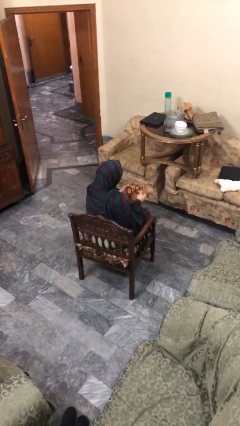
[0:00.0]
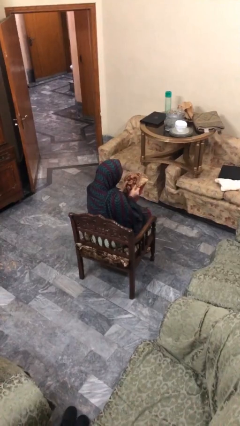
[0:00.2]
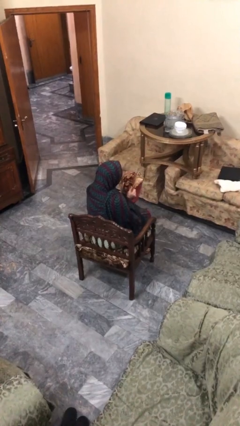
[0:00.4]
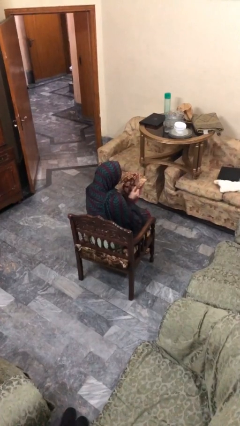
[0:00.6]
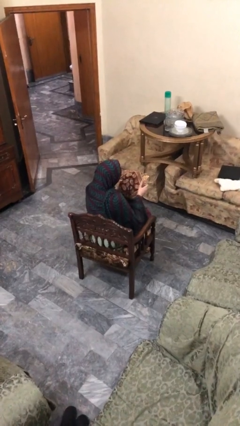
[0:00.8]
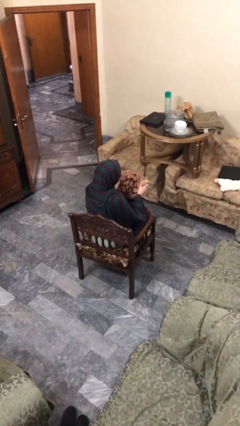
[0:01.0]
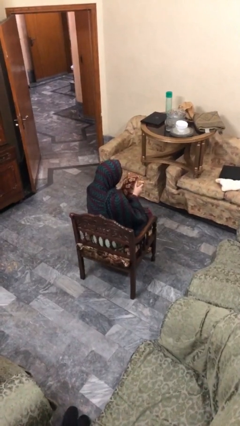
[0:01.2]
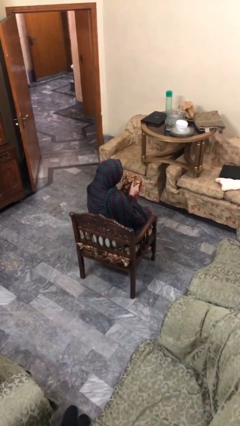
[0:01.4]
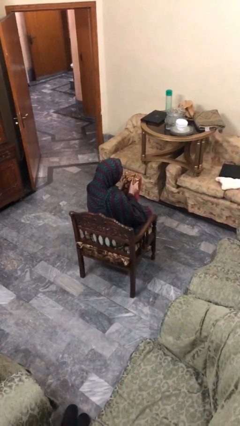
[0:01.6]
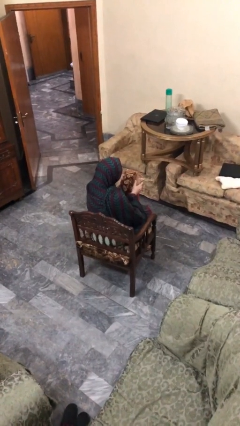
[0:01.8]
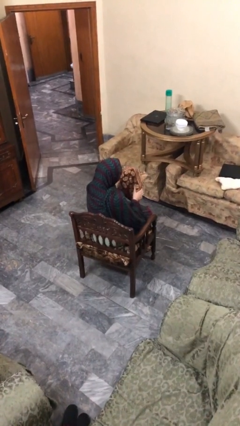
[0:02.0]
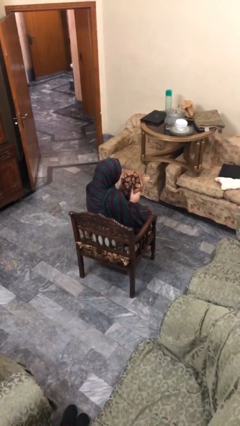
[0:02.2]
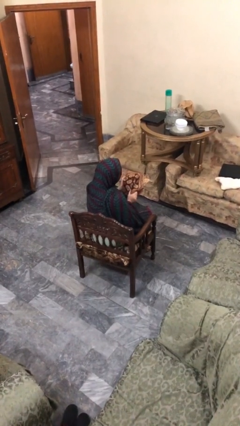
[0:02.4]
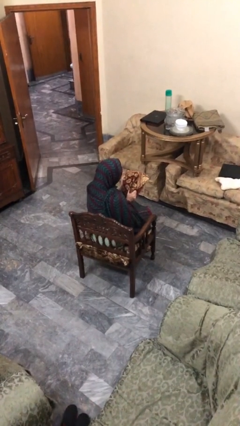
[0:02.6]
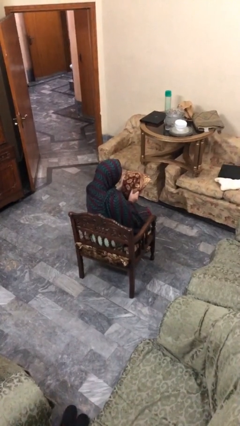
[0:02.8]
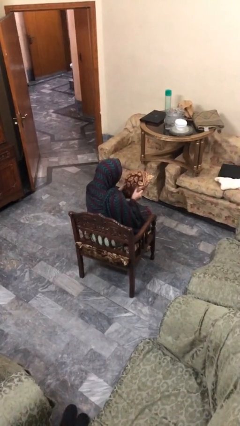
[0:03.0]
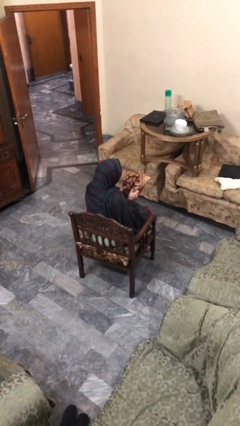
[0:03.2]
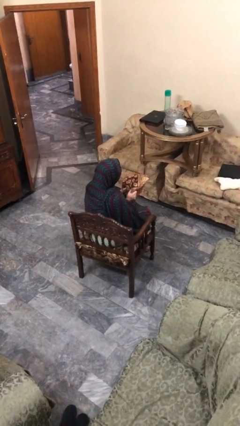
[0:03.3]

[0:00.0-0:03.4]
person squeezes object

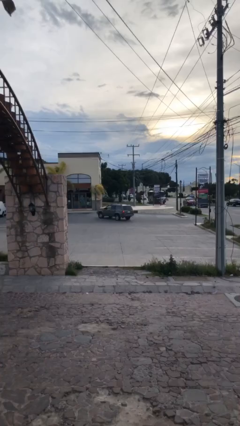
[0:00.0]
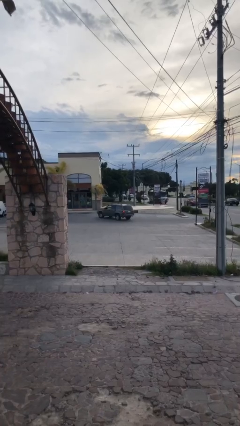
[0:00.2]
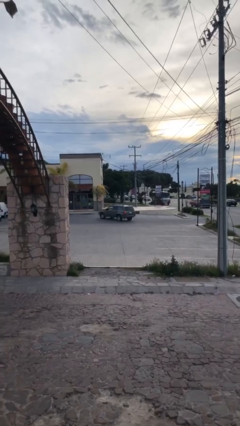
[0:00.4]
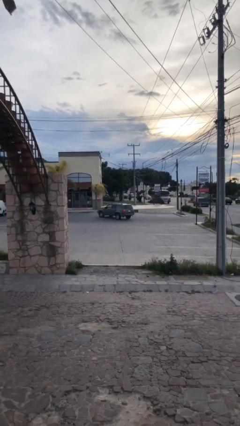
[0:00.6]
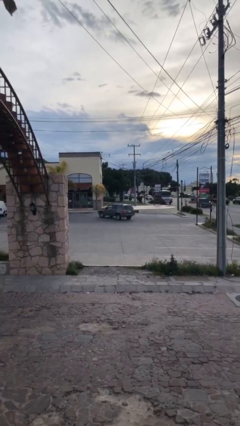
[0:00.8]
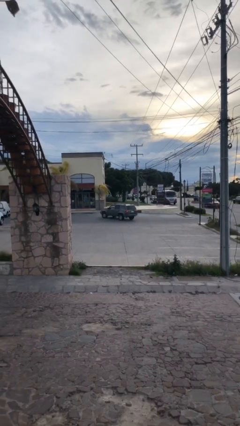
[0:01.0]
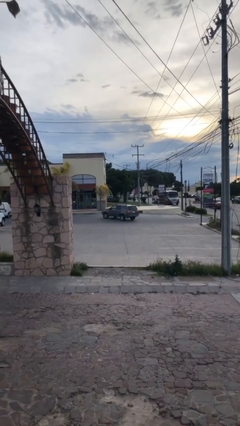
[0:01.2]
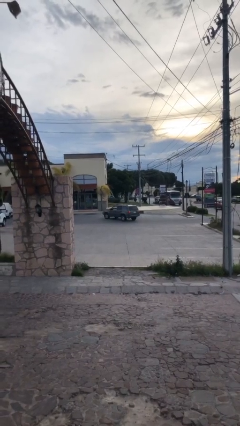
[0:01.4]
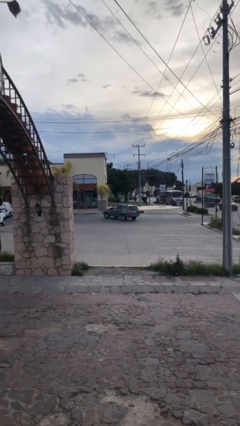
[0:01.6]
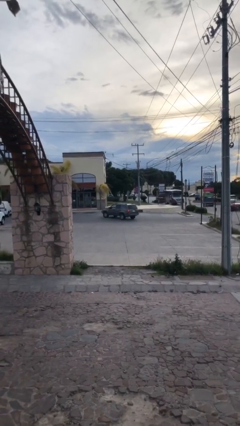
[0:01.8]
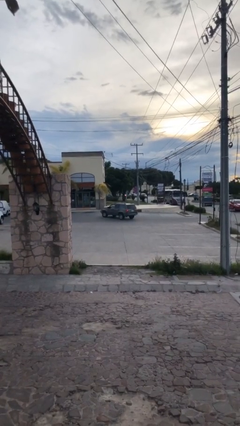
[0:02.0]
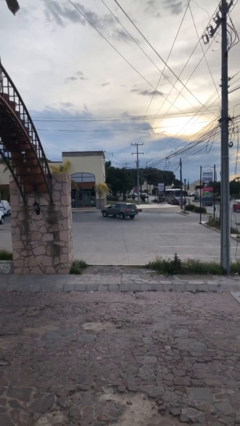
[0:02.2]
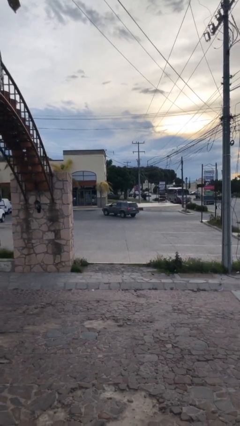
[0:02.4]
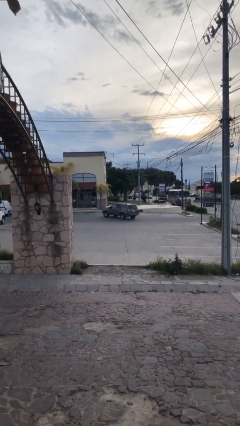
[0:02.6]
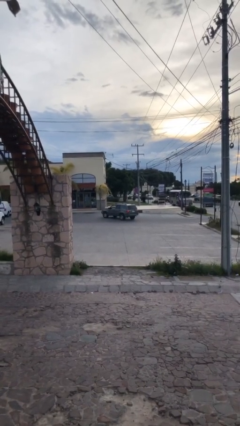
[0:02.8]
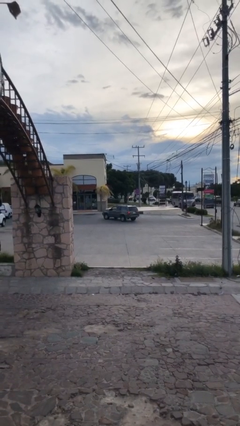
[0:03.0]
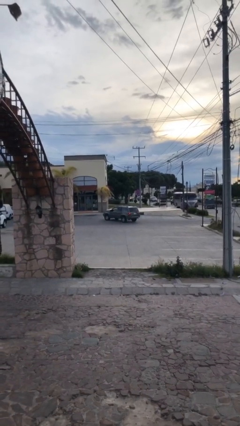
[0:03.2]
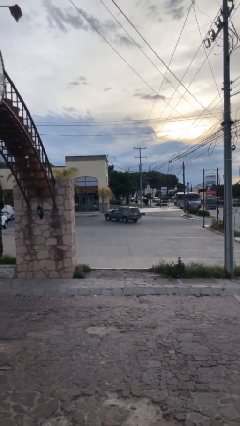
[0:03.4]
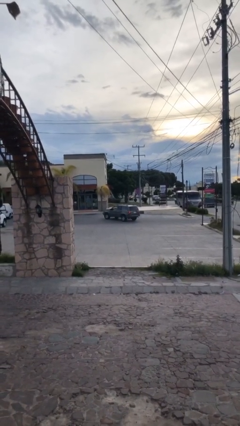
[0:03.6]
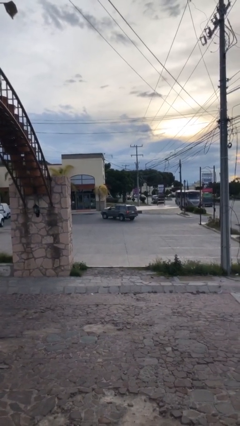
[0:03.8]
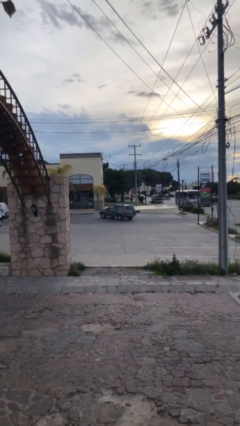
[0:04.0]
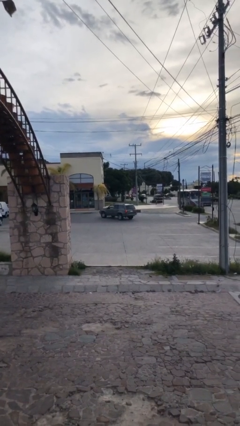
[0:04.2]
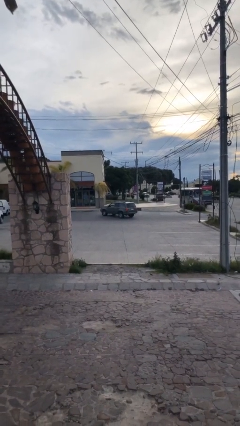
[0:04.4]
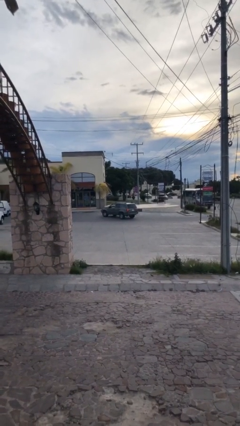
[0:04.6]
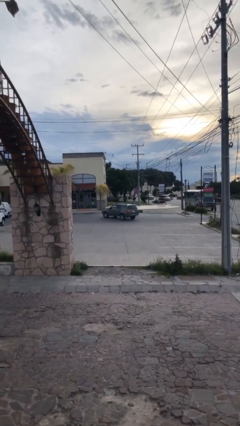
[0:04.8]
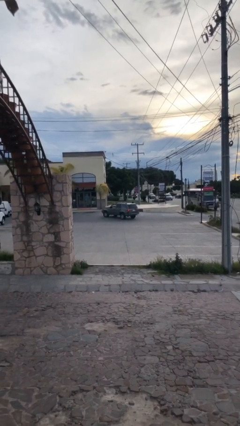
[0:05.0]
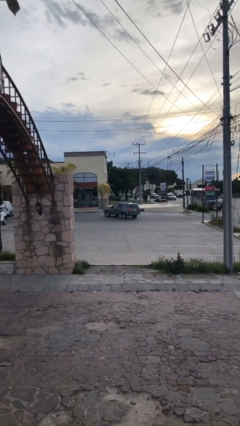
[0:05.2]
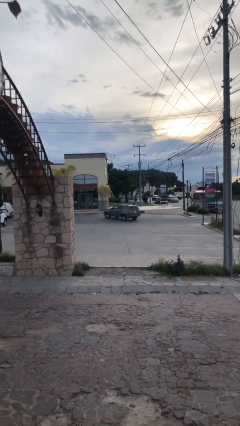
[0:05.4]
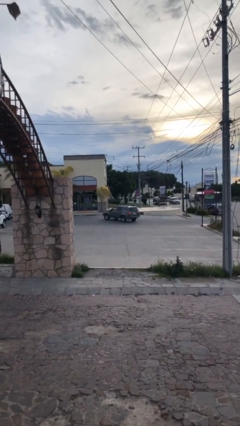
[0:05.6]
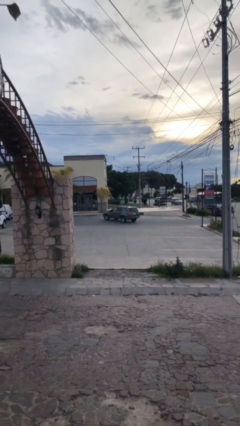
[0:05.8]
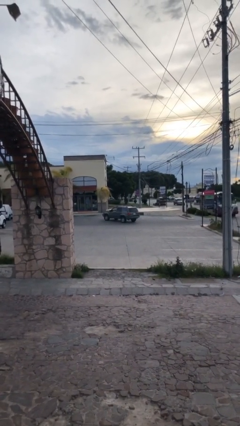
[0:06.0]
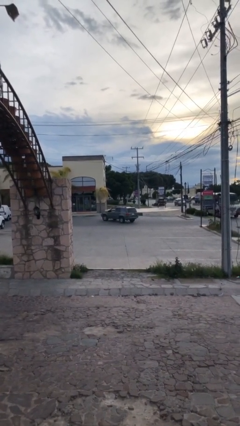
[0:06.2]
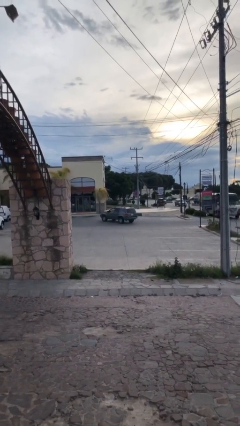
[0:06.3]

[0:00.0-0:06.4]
car drops off person

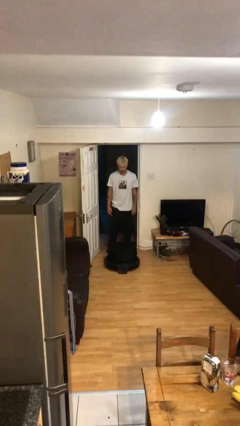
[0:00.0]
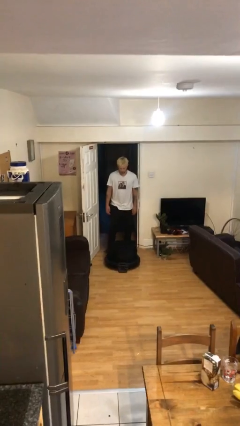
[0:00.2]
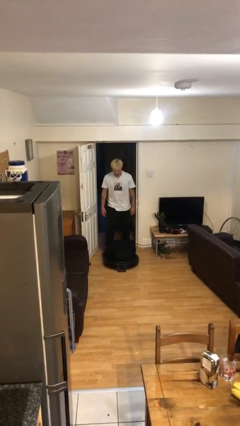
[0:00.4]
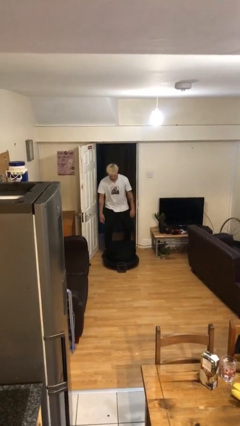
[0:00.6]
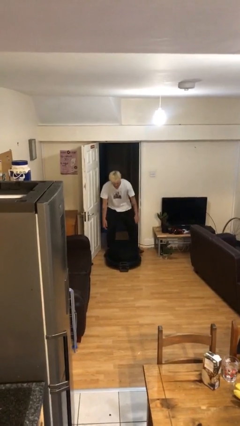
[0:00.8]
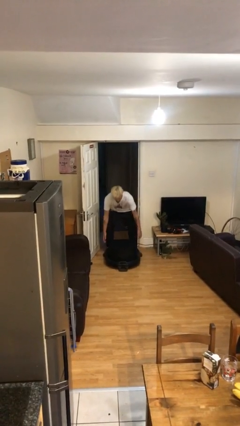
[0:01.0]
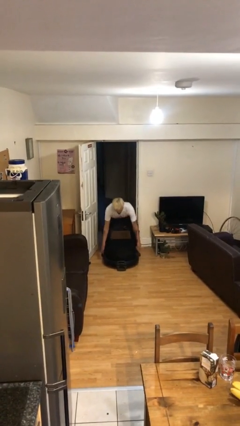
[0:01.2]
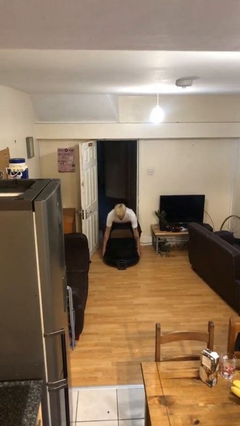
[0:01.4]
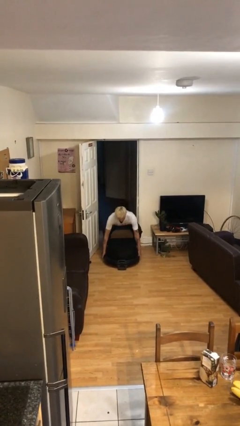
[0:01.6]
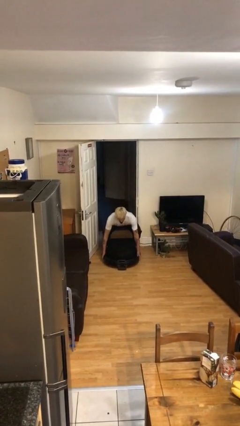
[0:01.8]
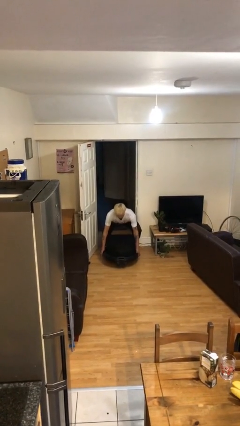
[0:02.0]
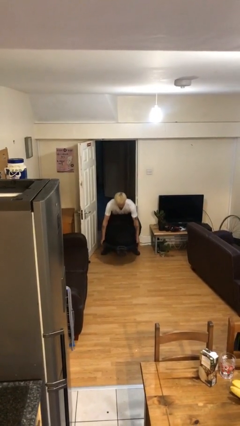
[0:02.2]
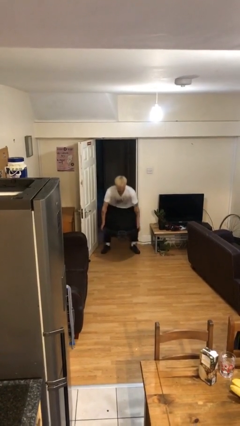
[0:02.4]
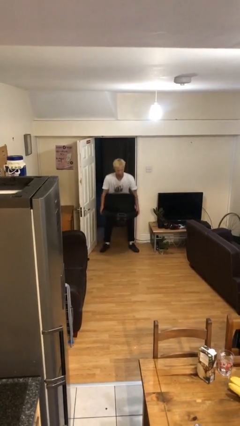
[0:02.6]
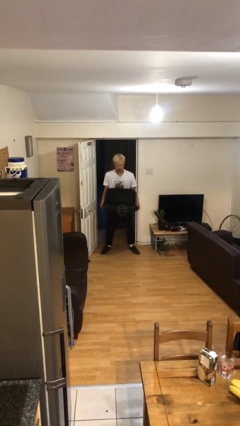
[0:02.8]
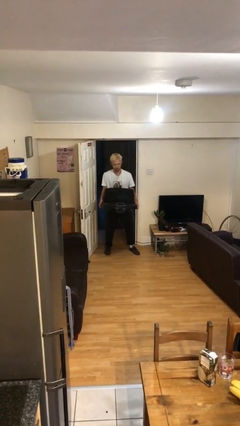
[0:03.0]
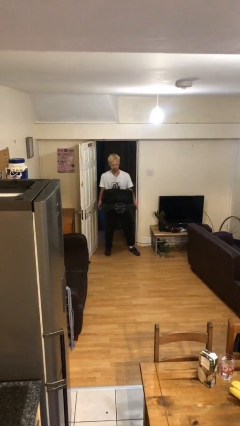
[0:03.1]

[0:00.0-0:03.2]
person picks up object from floor

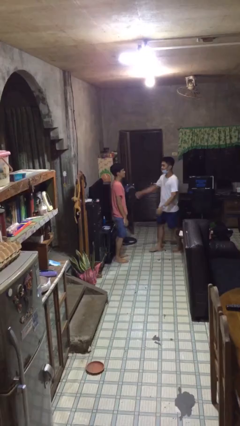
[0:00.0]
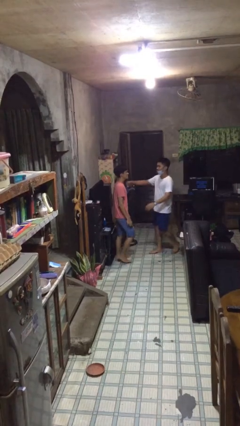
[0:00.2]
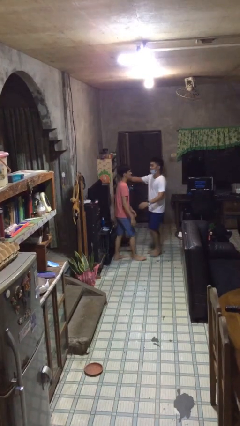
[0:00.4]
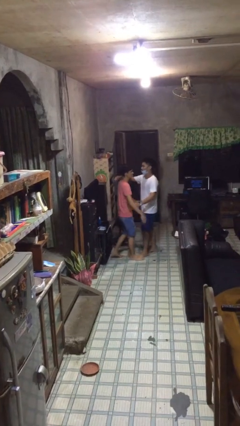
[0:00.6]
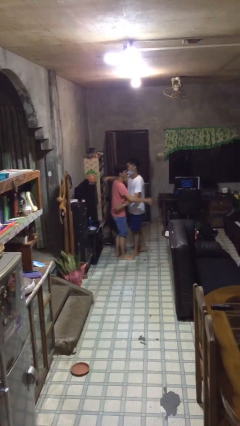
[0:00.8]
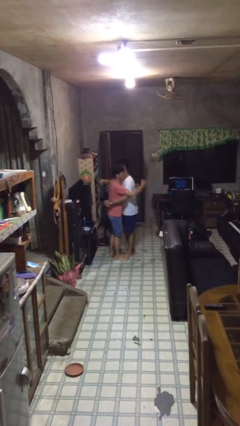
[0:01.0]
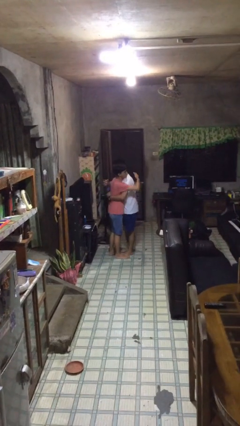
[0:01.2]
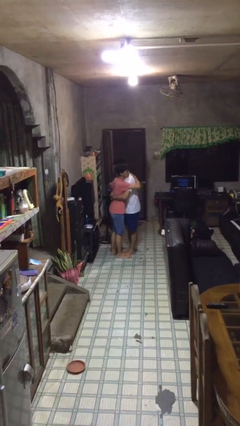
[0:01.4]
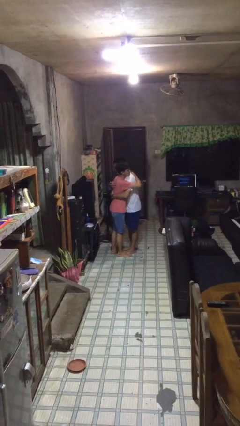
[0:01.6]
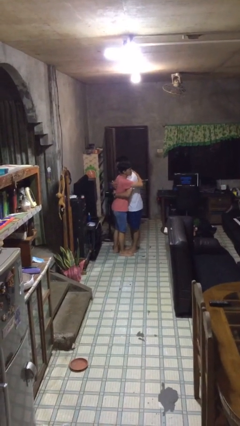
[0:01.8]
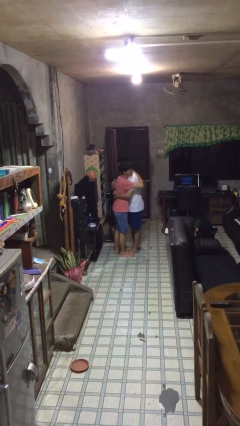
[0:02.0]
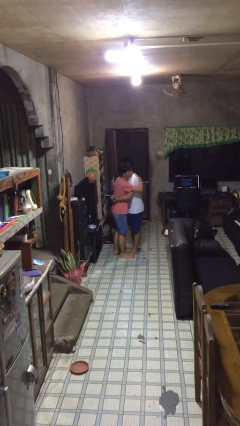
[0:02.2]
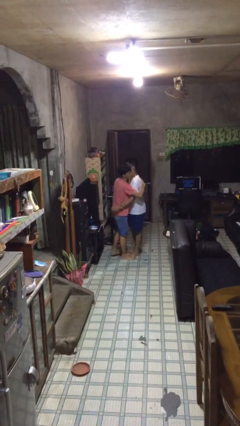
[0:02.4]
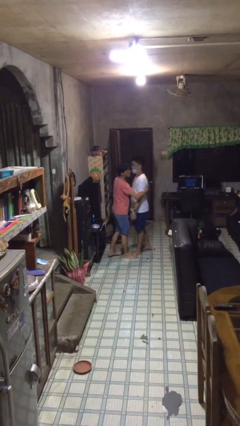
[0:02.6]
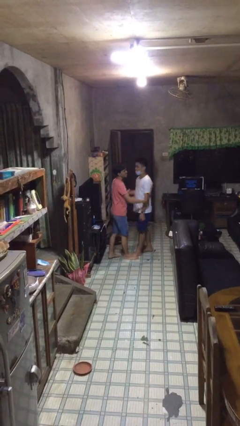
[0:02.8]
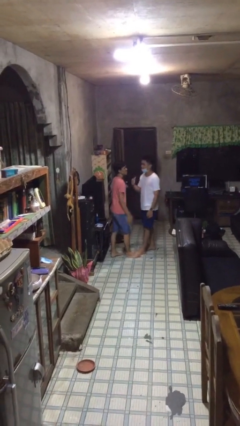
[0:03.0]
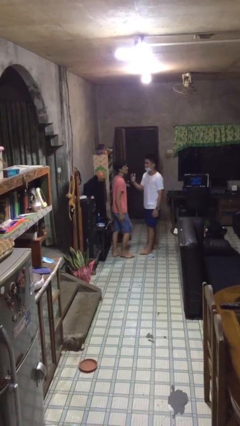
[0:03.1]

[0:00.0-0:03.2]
person embraces person

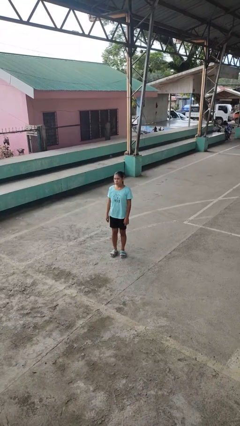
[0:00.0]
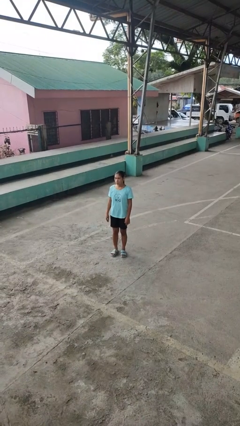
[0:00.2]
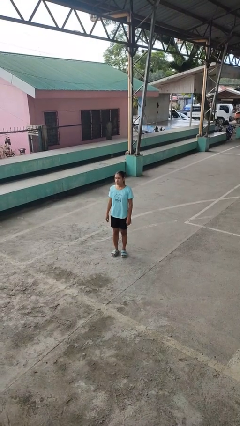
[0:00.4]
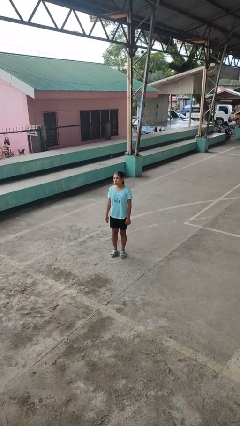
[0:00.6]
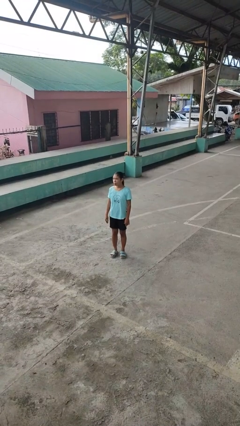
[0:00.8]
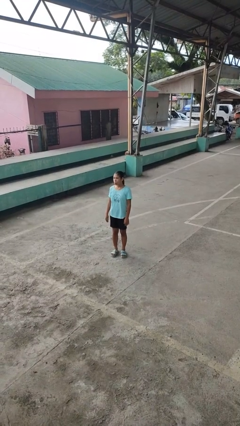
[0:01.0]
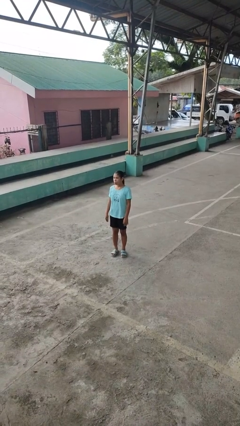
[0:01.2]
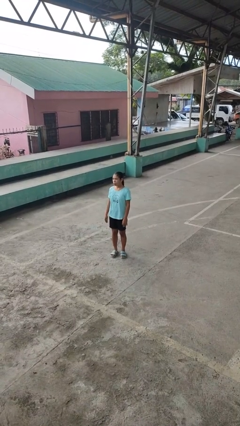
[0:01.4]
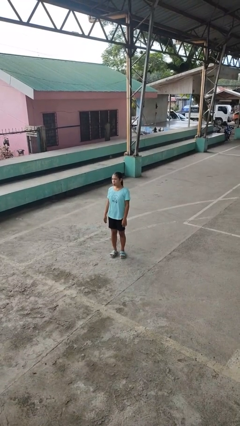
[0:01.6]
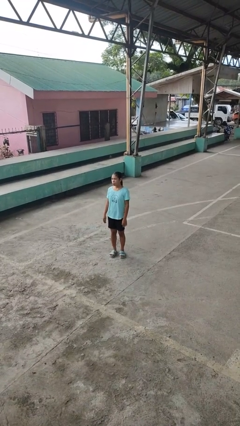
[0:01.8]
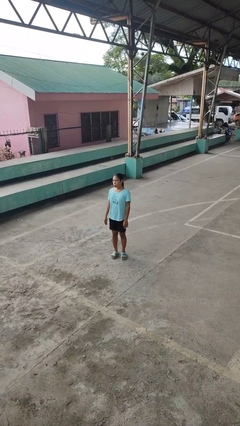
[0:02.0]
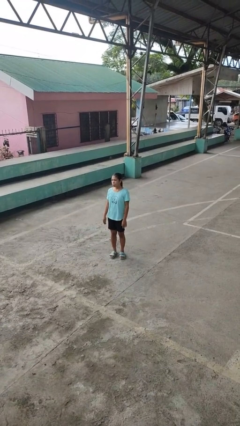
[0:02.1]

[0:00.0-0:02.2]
person sticks out tongue
